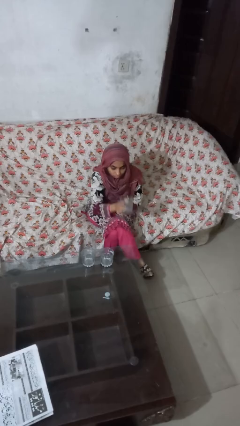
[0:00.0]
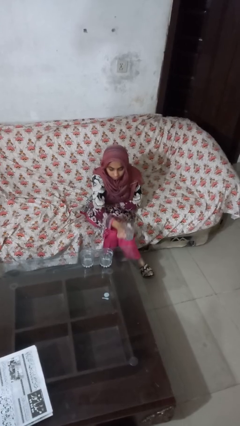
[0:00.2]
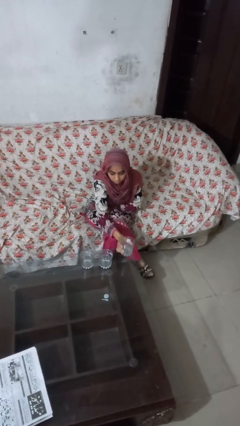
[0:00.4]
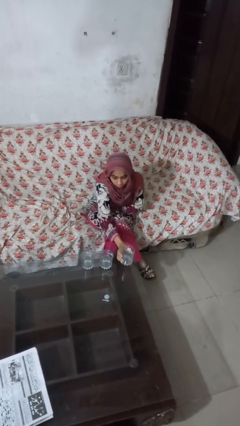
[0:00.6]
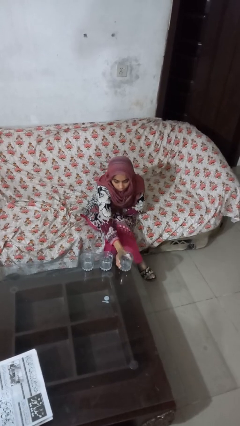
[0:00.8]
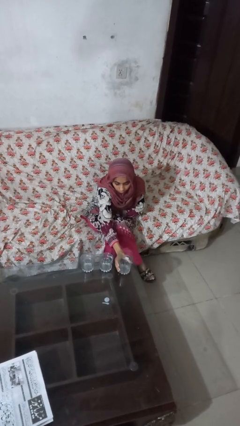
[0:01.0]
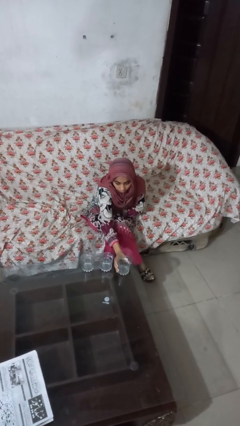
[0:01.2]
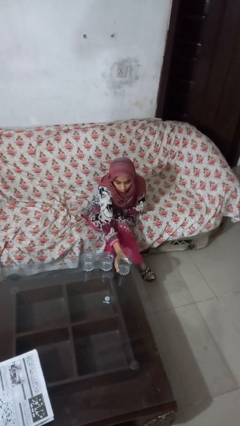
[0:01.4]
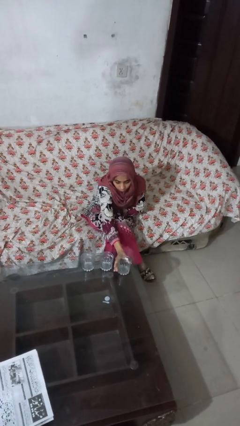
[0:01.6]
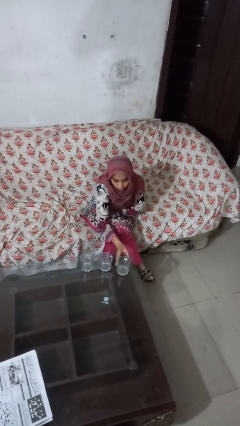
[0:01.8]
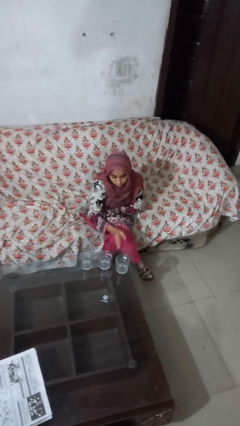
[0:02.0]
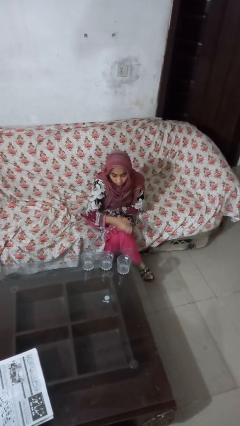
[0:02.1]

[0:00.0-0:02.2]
person puts down object on table

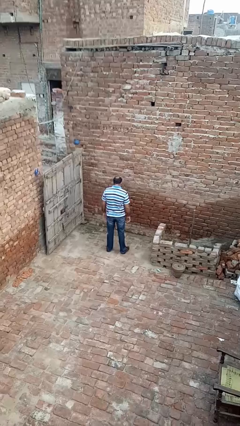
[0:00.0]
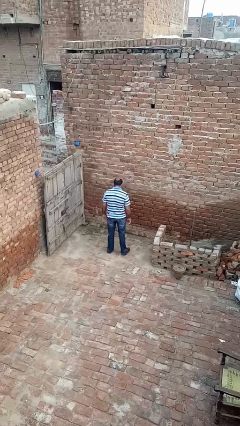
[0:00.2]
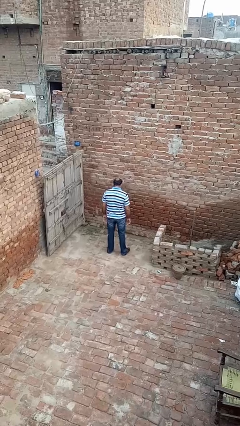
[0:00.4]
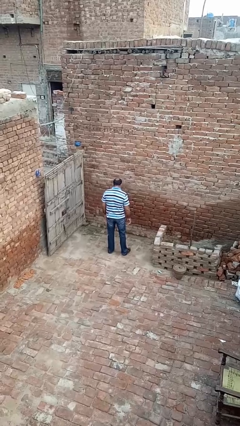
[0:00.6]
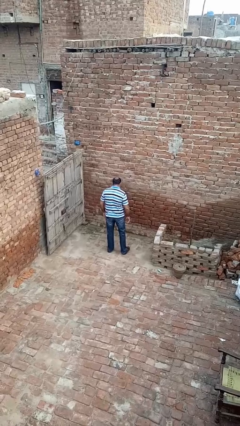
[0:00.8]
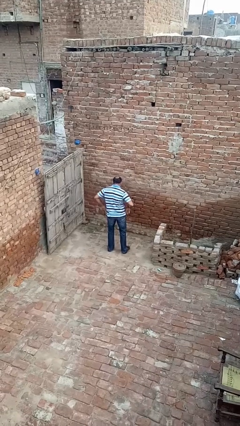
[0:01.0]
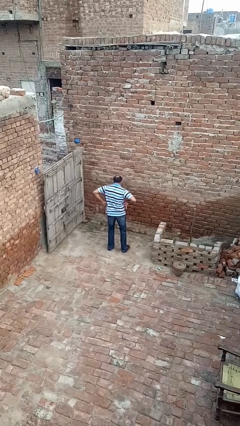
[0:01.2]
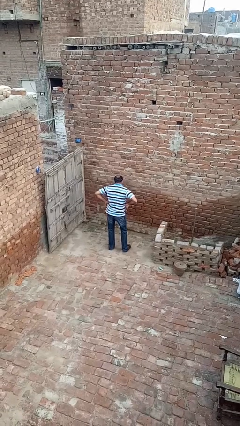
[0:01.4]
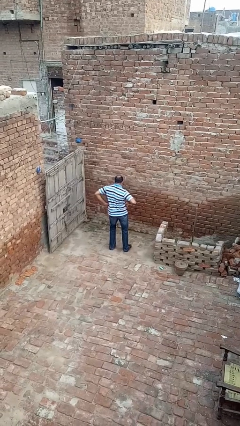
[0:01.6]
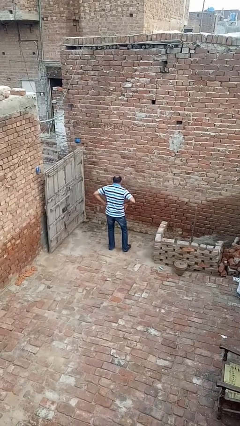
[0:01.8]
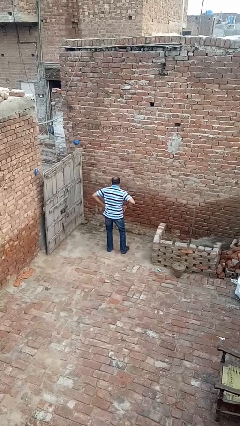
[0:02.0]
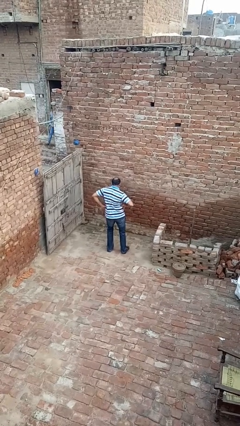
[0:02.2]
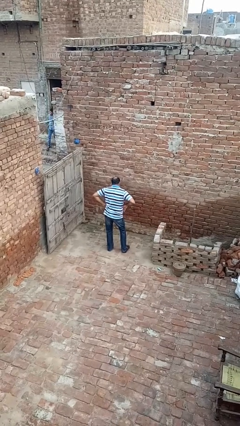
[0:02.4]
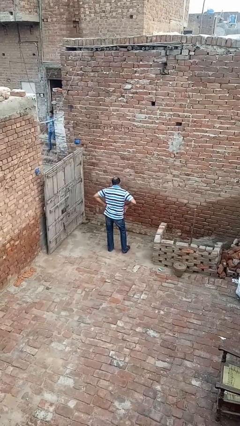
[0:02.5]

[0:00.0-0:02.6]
person wiggles hips

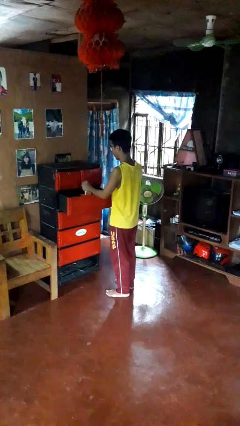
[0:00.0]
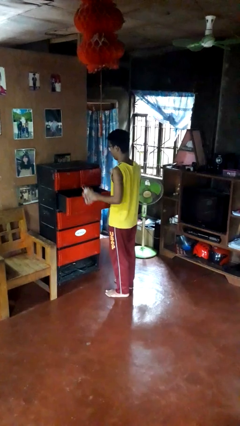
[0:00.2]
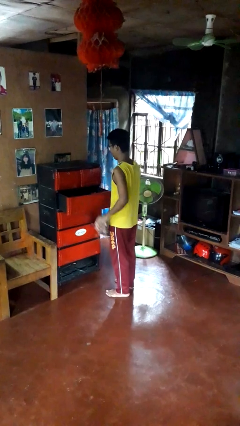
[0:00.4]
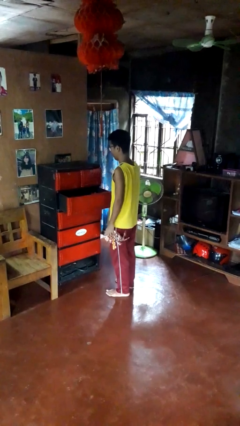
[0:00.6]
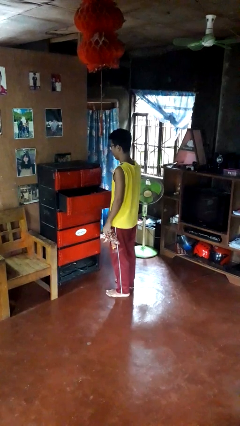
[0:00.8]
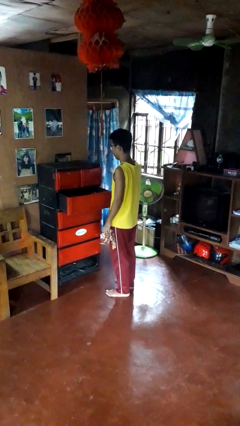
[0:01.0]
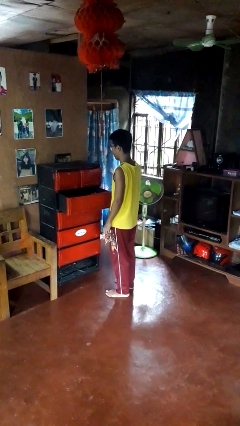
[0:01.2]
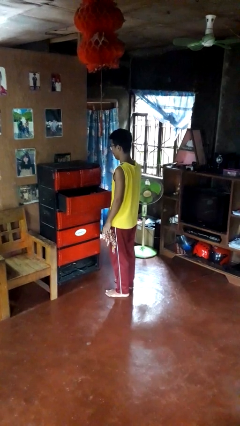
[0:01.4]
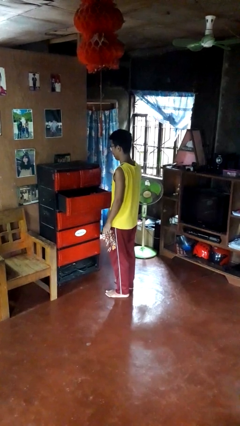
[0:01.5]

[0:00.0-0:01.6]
person takes clothes from dresser

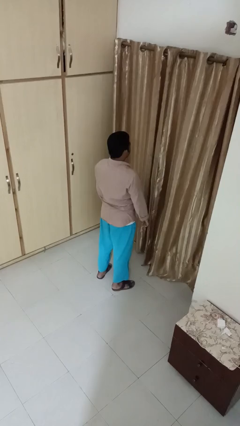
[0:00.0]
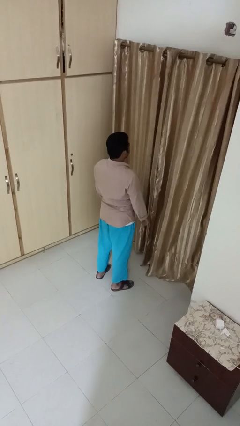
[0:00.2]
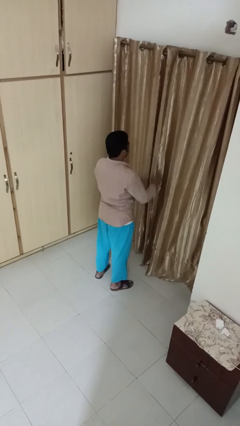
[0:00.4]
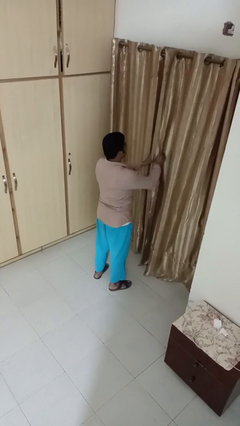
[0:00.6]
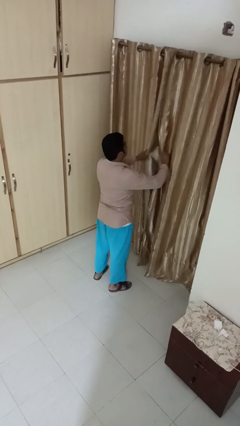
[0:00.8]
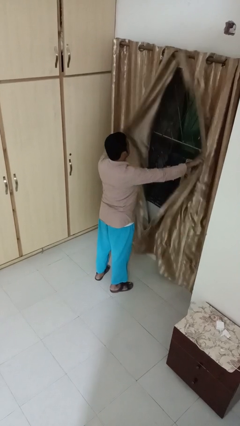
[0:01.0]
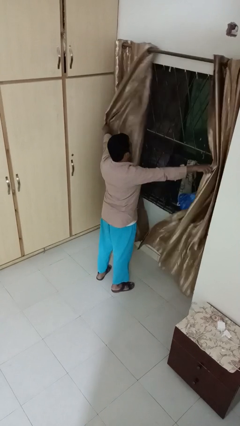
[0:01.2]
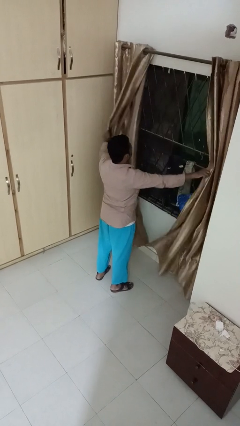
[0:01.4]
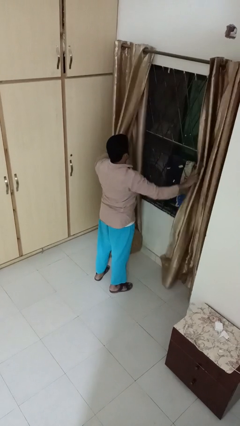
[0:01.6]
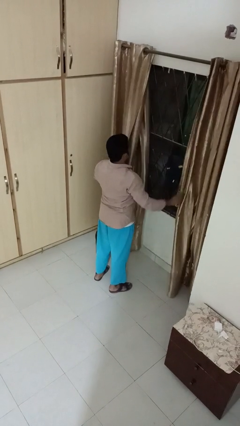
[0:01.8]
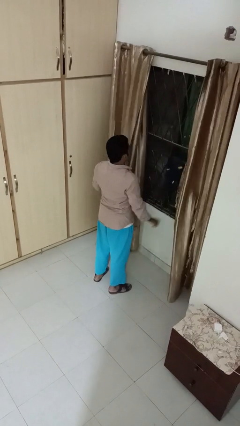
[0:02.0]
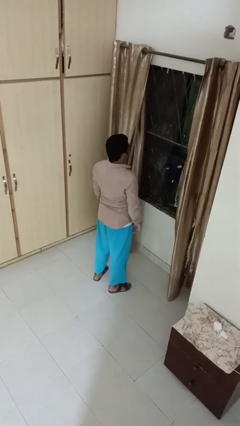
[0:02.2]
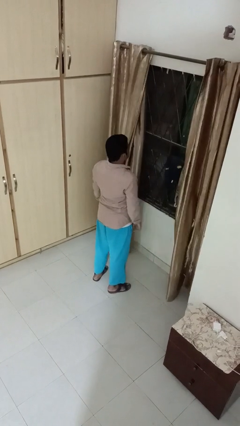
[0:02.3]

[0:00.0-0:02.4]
person opens curtains

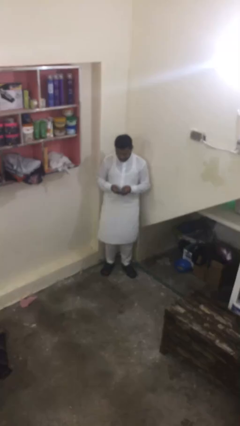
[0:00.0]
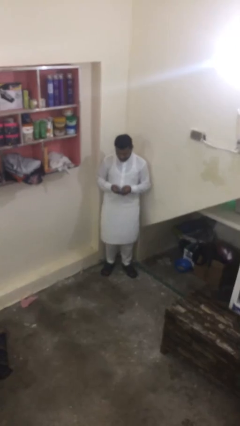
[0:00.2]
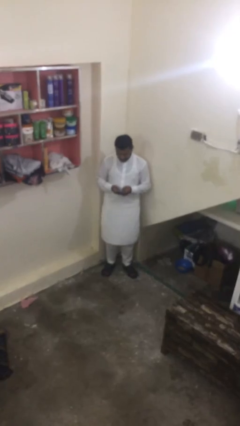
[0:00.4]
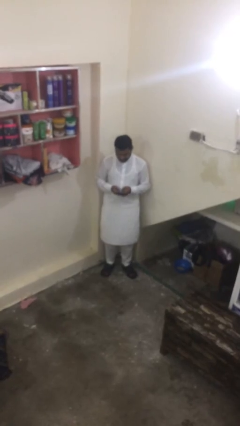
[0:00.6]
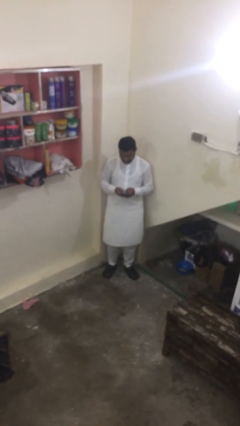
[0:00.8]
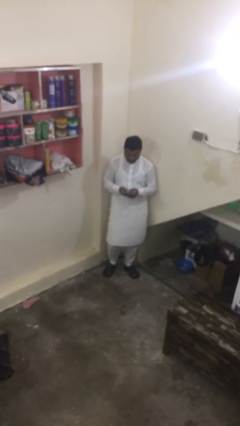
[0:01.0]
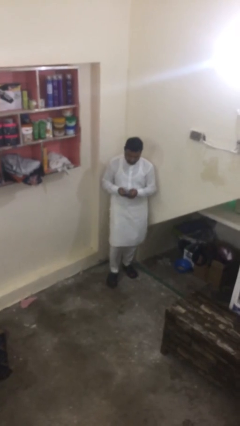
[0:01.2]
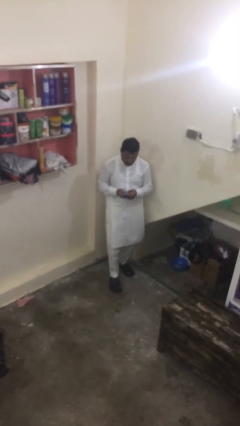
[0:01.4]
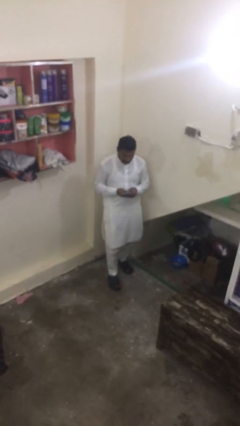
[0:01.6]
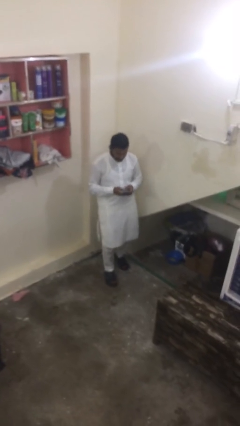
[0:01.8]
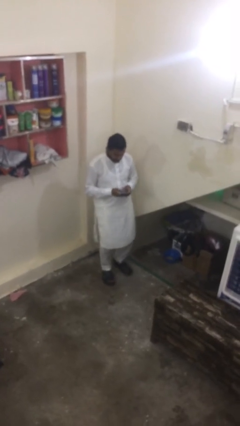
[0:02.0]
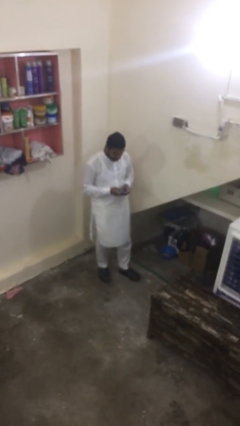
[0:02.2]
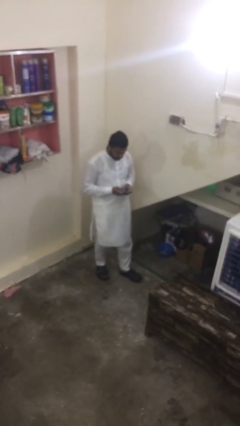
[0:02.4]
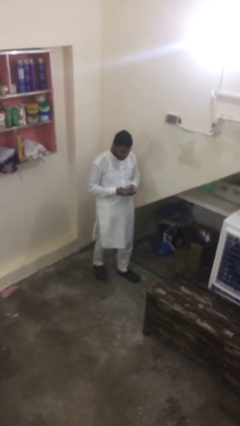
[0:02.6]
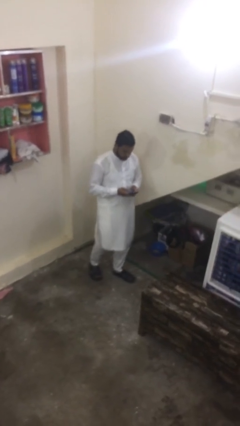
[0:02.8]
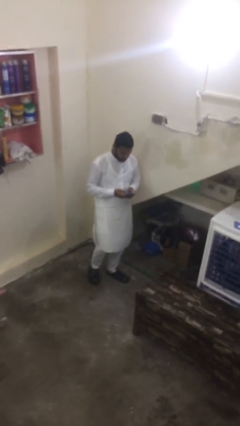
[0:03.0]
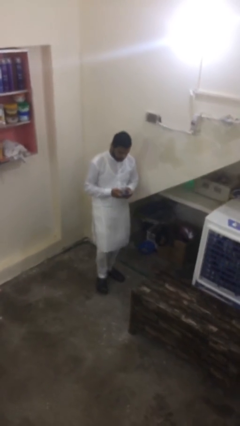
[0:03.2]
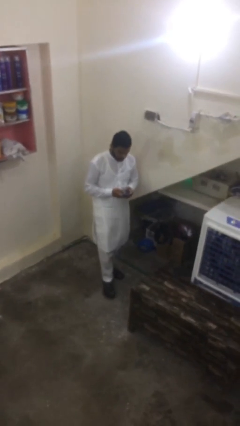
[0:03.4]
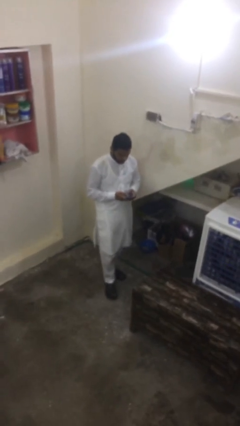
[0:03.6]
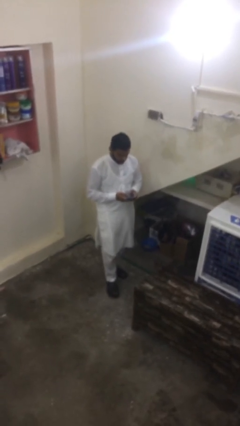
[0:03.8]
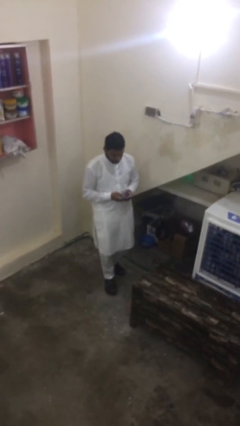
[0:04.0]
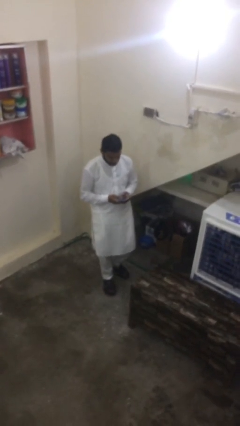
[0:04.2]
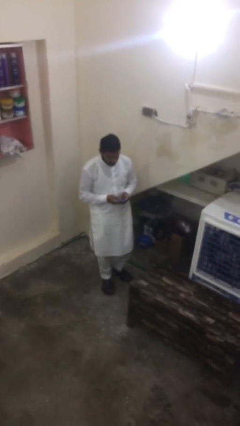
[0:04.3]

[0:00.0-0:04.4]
person texts on phone

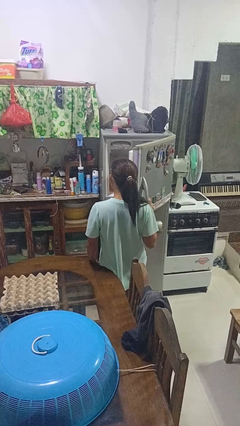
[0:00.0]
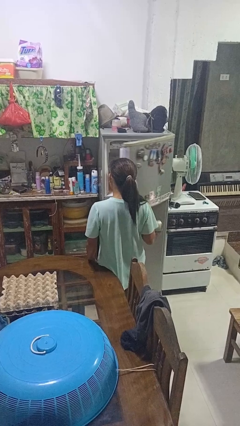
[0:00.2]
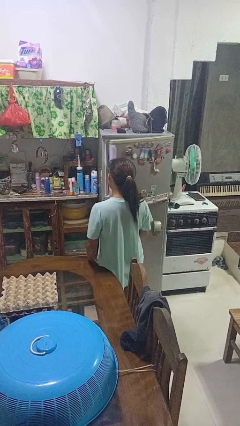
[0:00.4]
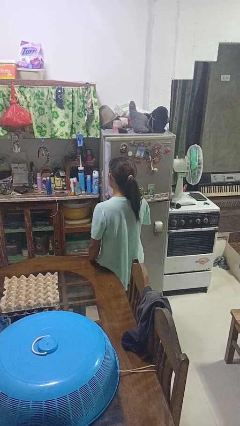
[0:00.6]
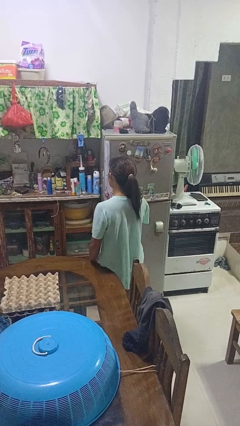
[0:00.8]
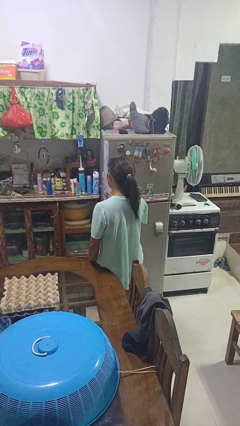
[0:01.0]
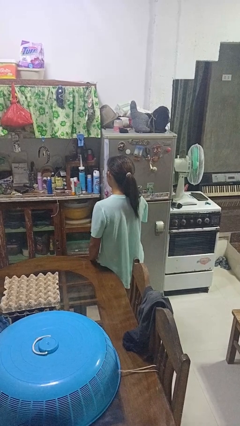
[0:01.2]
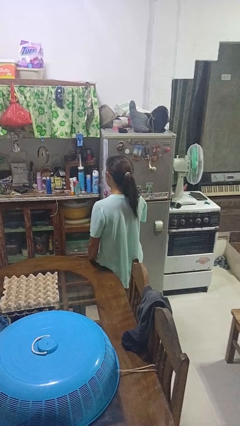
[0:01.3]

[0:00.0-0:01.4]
person closes refrigerator

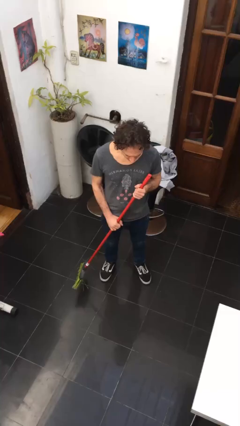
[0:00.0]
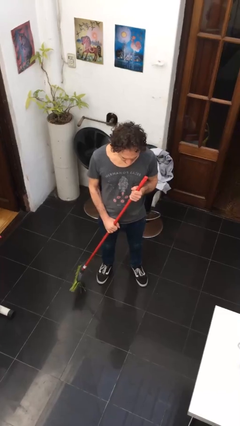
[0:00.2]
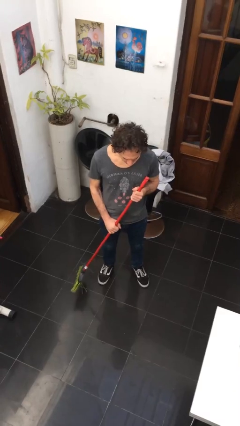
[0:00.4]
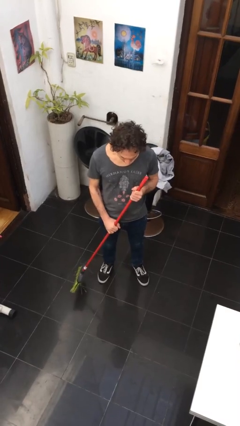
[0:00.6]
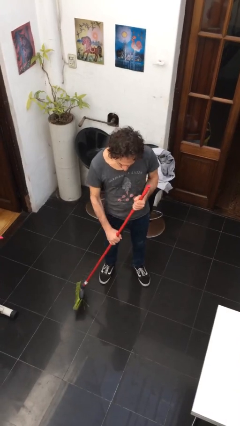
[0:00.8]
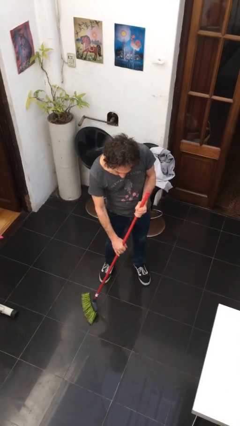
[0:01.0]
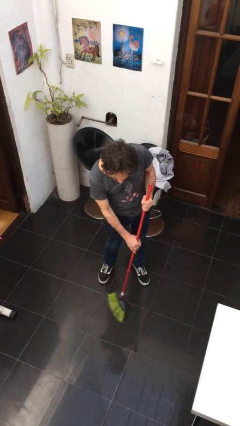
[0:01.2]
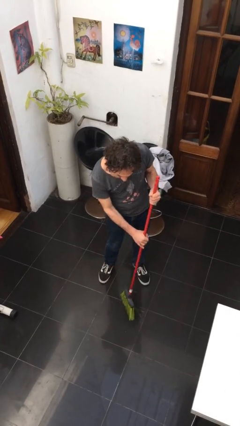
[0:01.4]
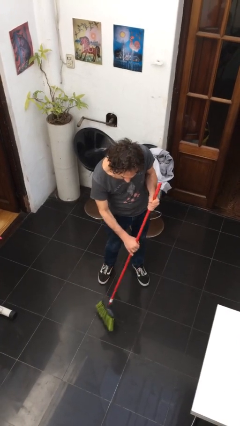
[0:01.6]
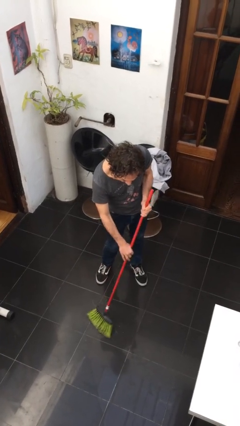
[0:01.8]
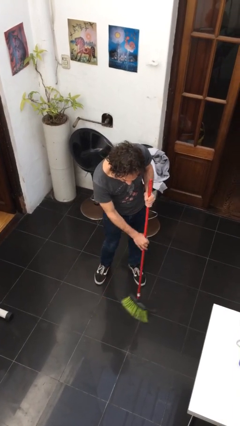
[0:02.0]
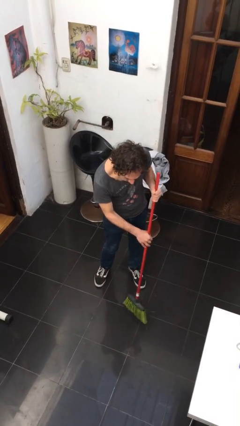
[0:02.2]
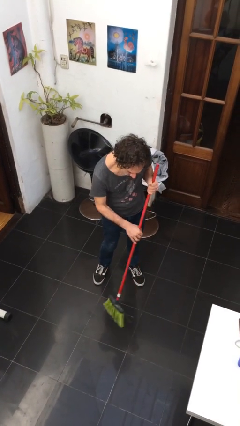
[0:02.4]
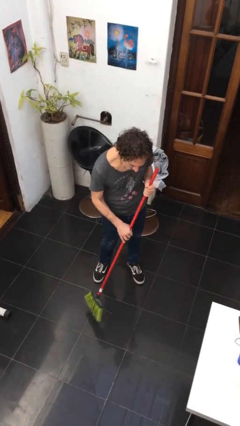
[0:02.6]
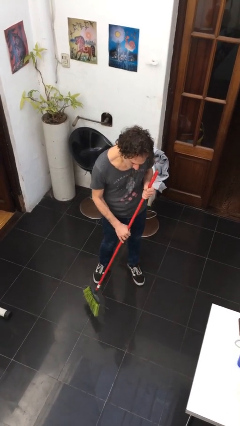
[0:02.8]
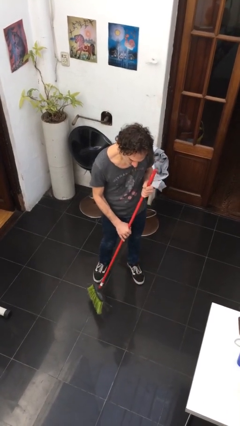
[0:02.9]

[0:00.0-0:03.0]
person sweeps floor
